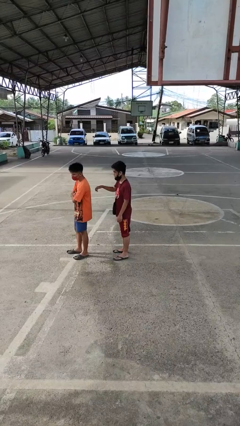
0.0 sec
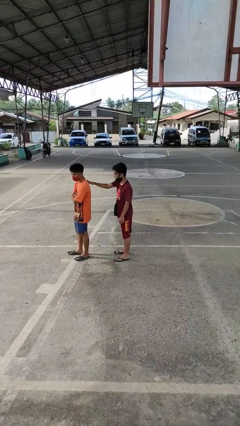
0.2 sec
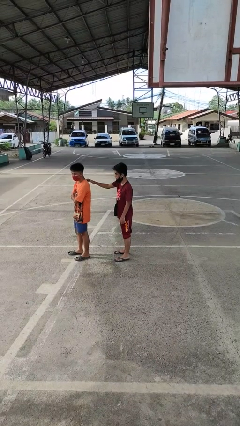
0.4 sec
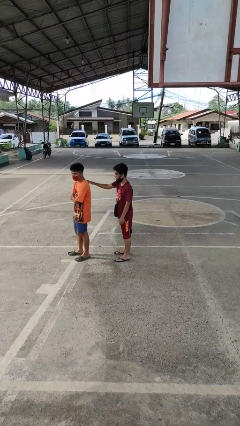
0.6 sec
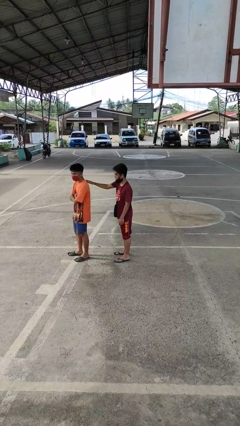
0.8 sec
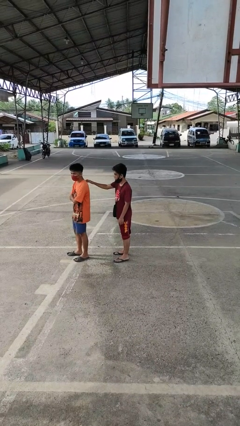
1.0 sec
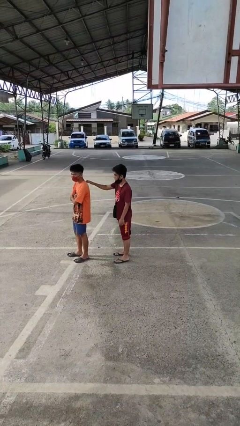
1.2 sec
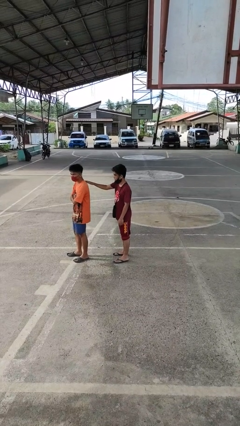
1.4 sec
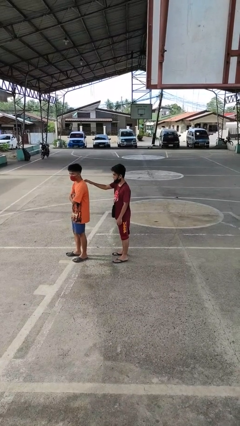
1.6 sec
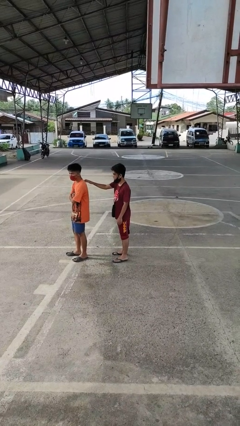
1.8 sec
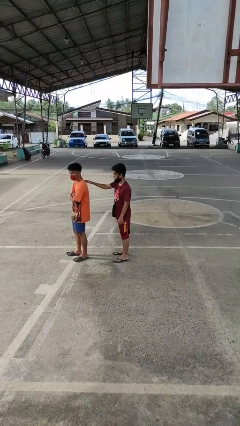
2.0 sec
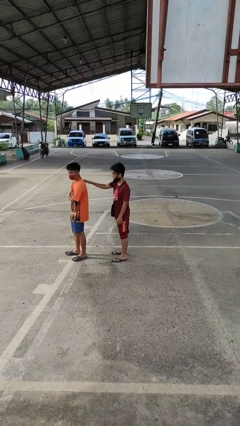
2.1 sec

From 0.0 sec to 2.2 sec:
person touches back of person

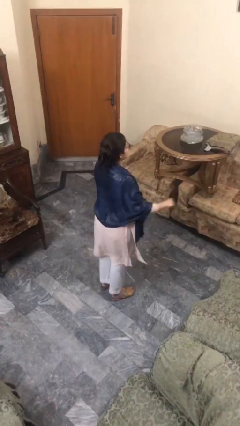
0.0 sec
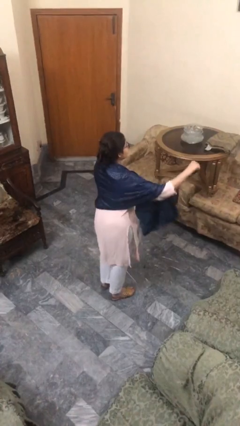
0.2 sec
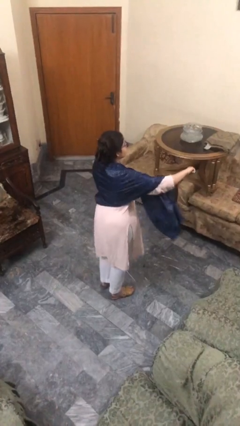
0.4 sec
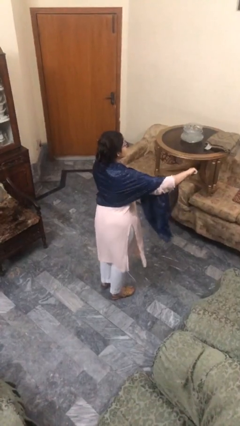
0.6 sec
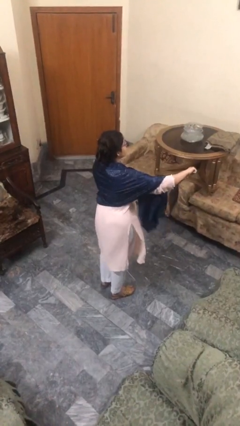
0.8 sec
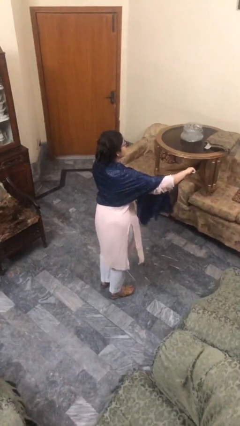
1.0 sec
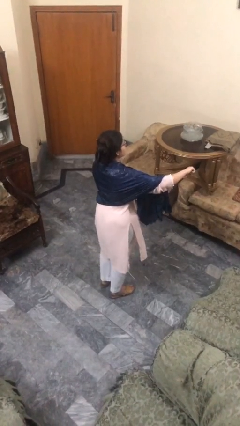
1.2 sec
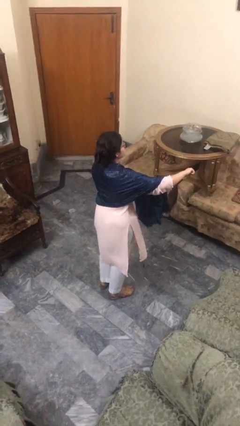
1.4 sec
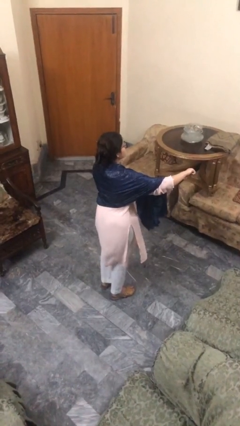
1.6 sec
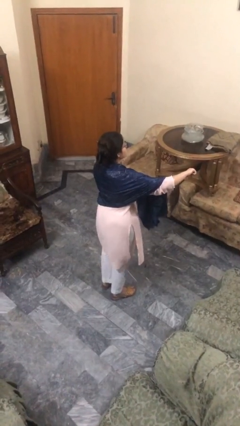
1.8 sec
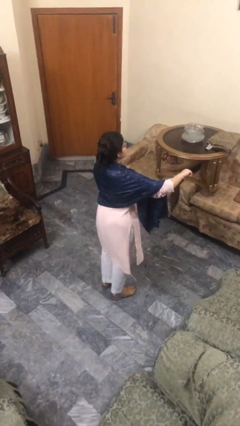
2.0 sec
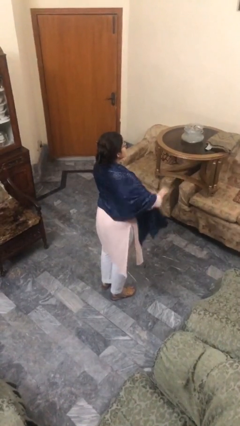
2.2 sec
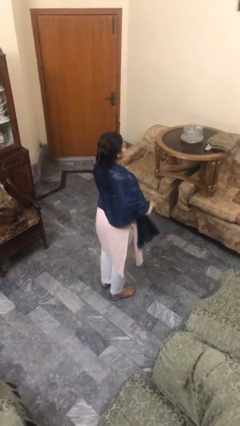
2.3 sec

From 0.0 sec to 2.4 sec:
person gestures thumbs down

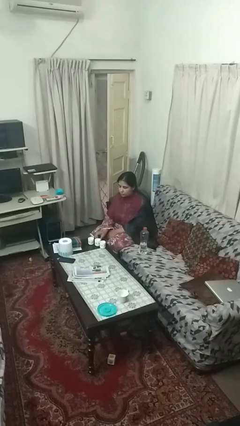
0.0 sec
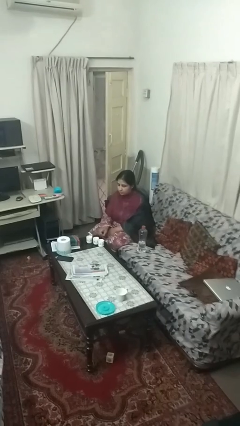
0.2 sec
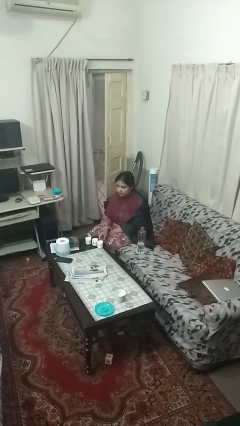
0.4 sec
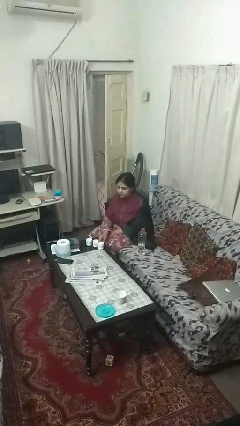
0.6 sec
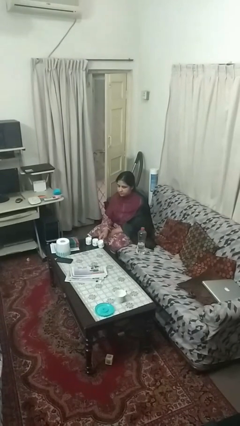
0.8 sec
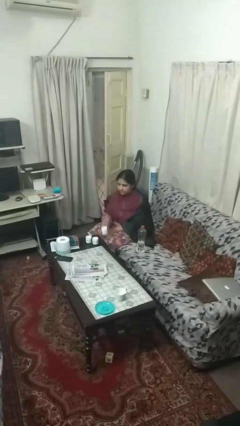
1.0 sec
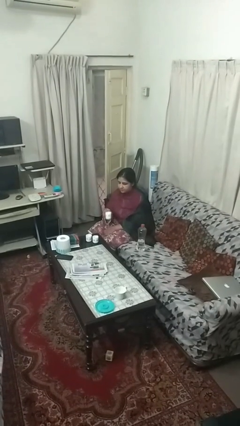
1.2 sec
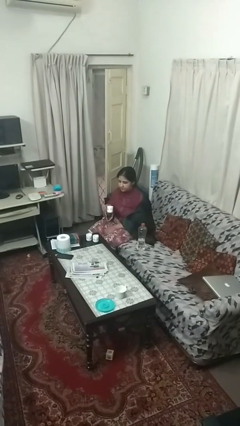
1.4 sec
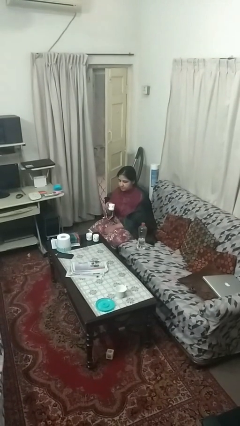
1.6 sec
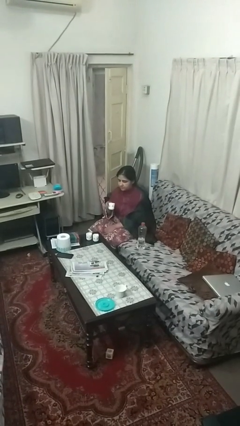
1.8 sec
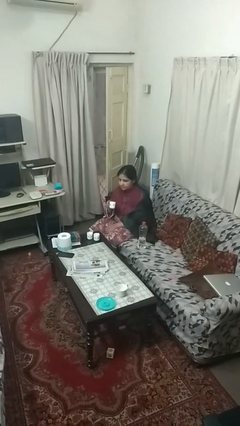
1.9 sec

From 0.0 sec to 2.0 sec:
person picks up object from table

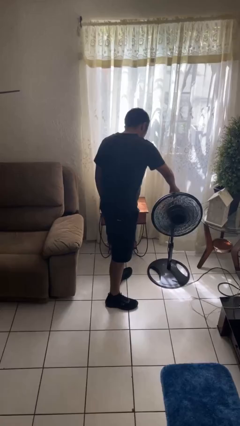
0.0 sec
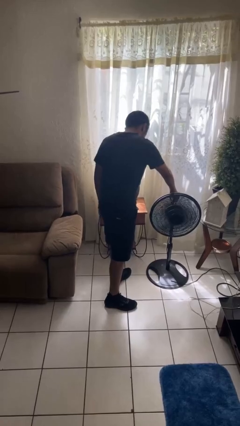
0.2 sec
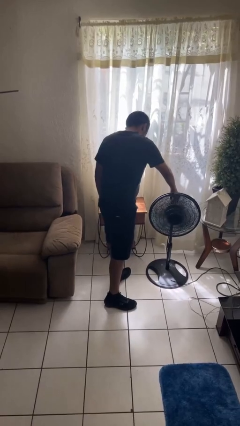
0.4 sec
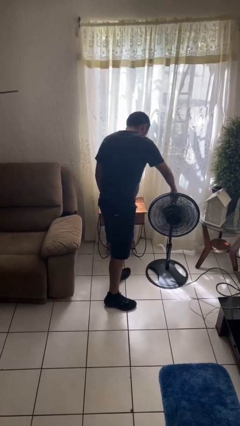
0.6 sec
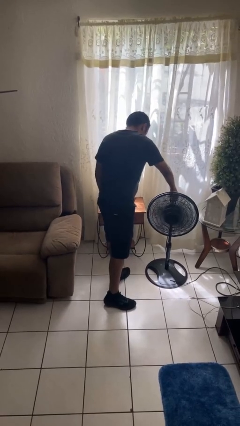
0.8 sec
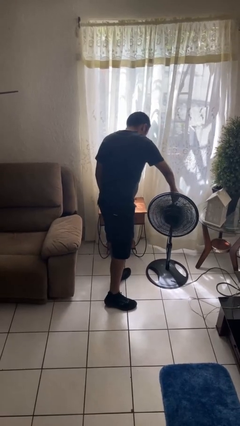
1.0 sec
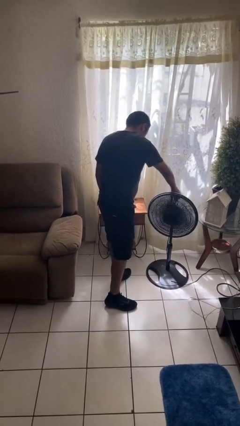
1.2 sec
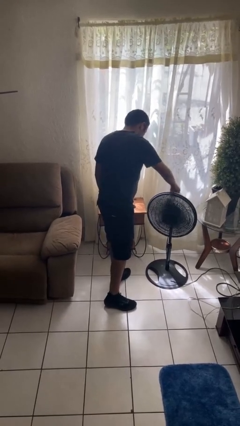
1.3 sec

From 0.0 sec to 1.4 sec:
person turns off fan

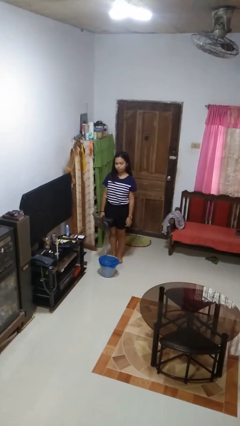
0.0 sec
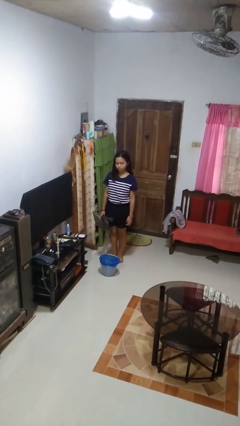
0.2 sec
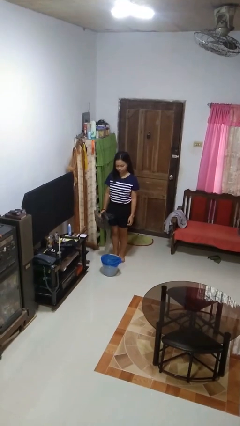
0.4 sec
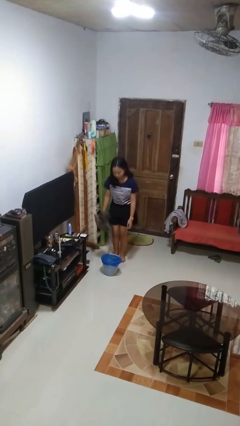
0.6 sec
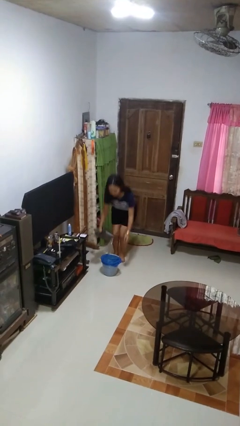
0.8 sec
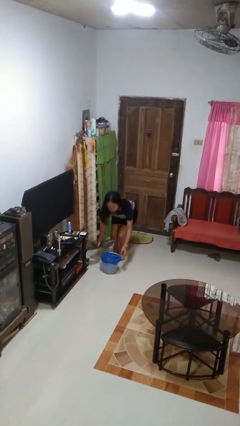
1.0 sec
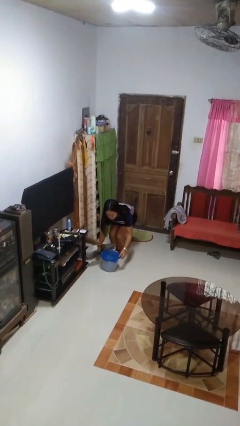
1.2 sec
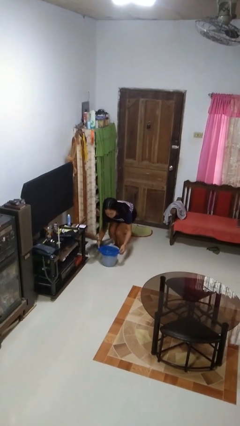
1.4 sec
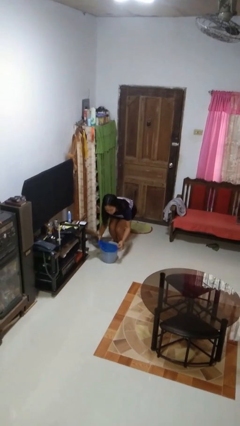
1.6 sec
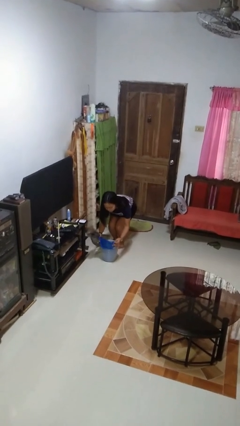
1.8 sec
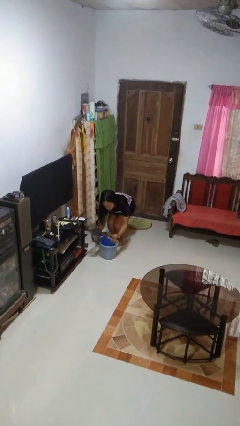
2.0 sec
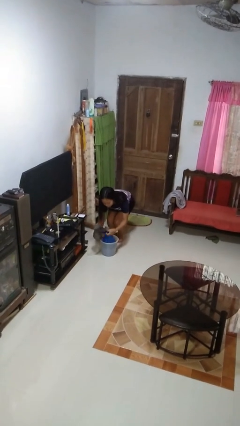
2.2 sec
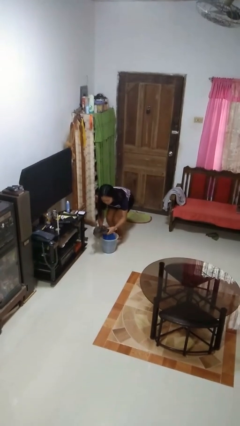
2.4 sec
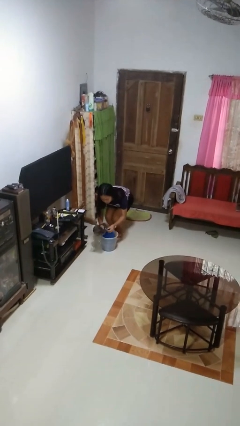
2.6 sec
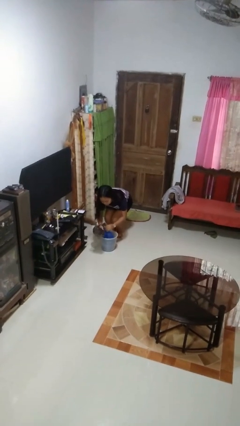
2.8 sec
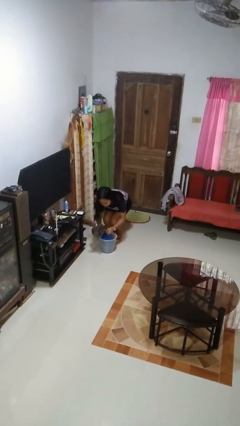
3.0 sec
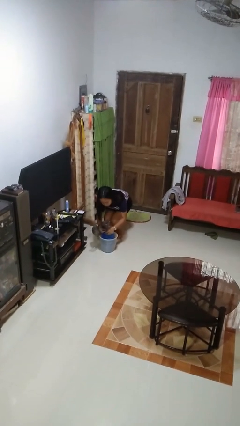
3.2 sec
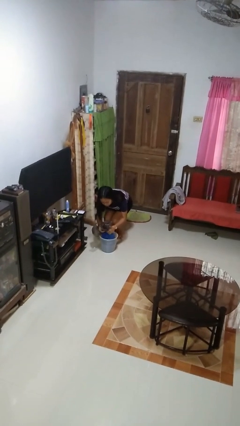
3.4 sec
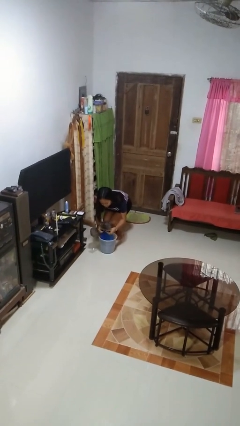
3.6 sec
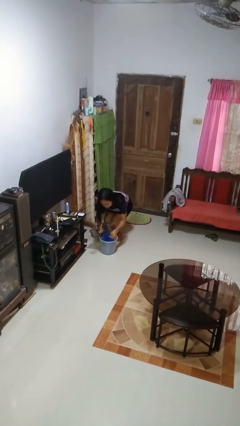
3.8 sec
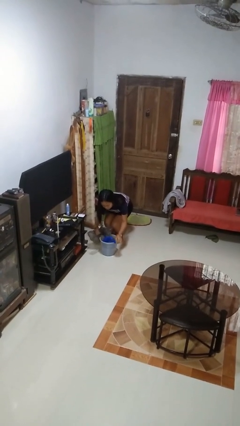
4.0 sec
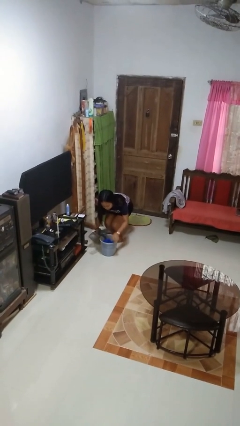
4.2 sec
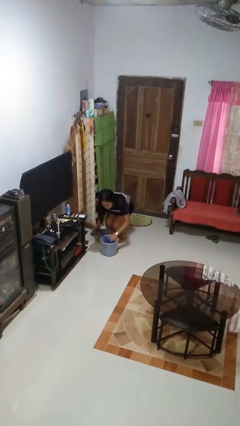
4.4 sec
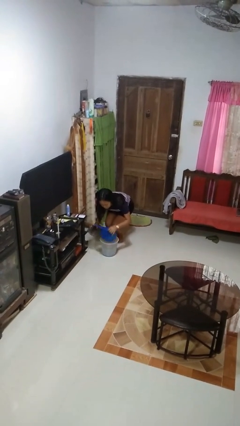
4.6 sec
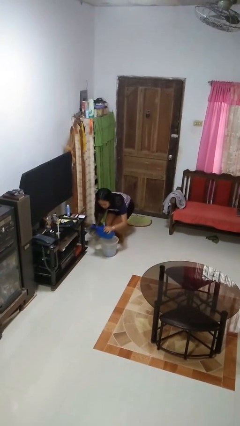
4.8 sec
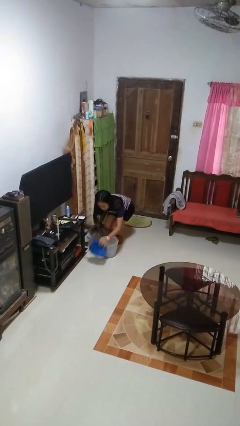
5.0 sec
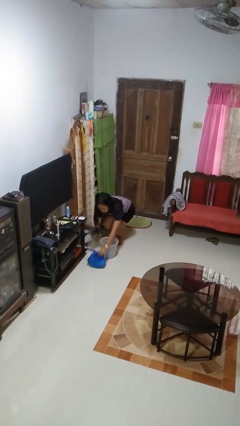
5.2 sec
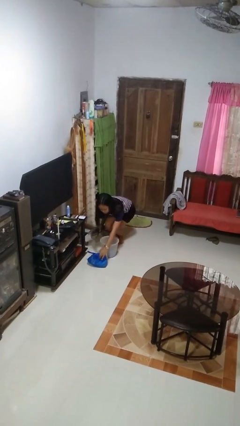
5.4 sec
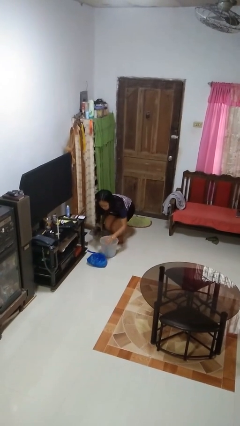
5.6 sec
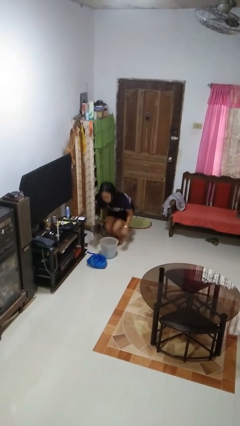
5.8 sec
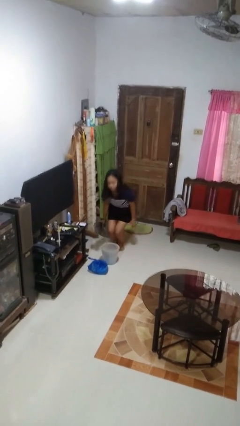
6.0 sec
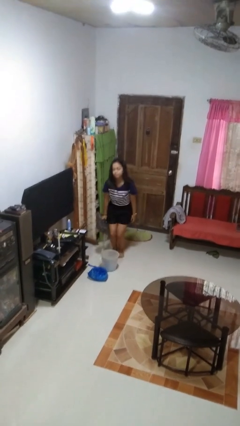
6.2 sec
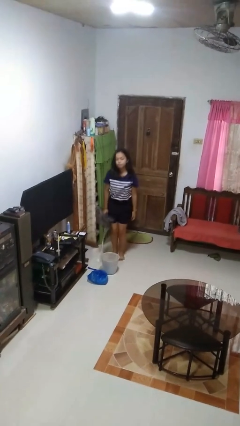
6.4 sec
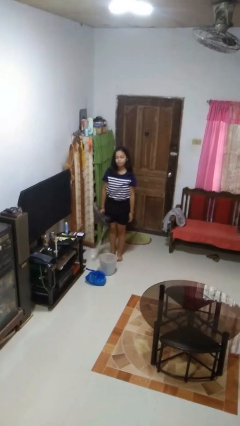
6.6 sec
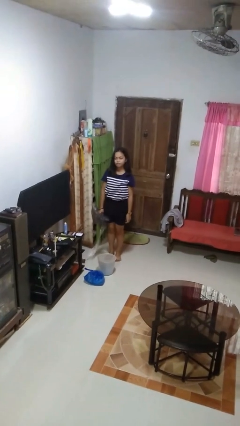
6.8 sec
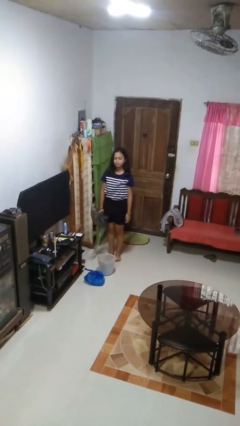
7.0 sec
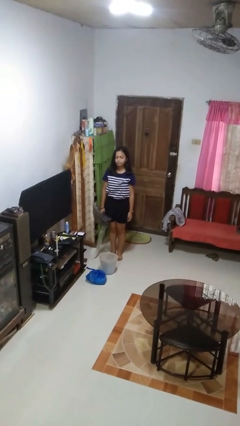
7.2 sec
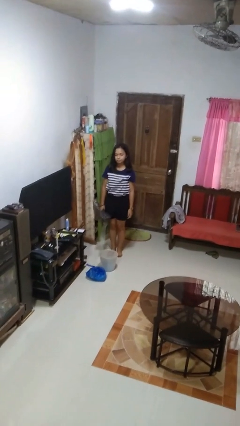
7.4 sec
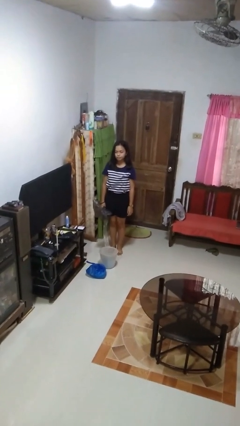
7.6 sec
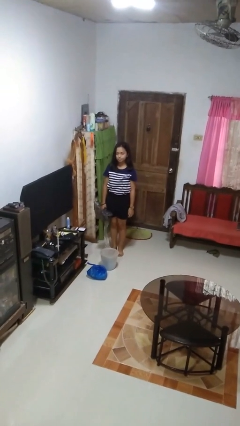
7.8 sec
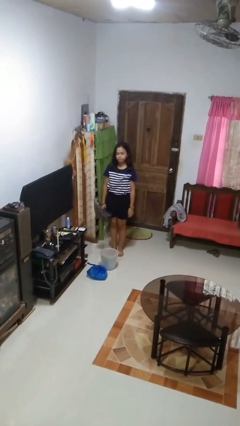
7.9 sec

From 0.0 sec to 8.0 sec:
person removes trashbag from trashcan

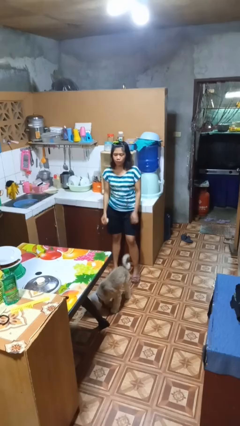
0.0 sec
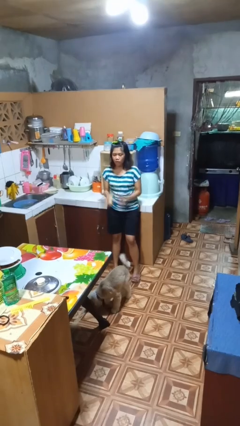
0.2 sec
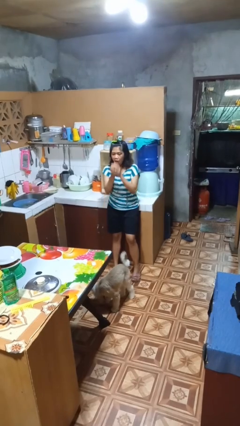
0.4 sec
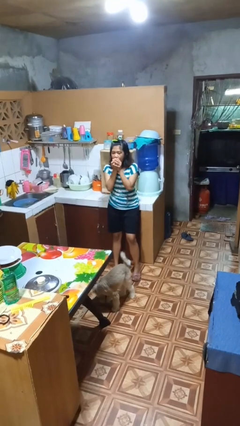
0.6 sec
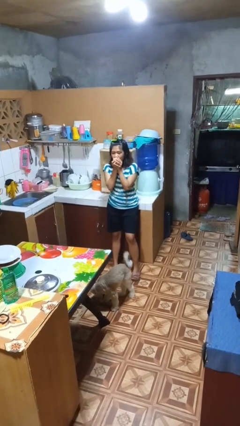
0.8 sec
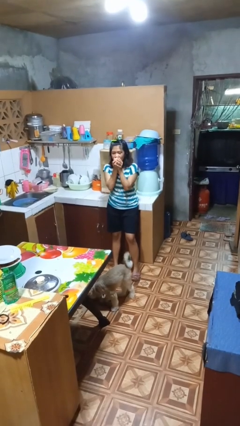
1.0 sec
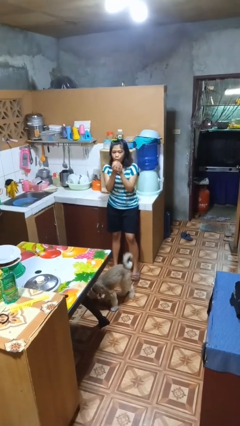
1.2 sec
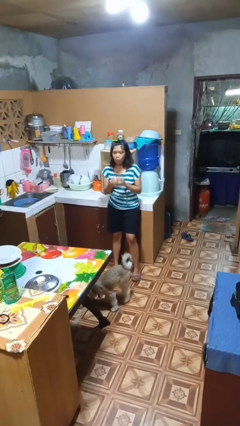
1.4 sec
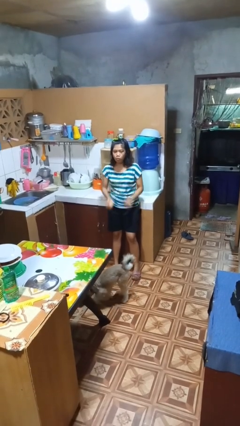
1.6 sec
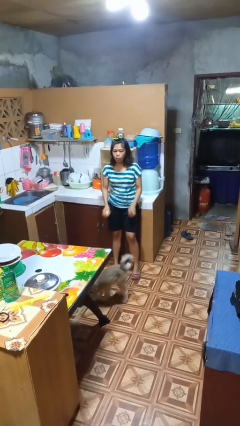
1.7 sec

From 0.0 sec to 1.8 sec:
person eats apple
